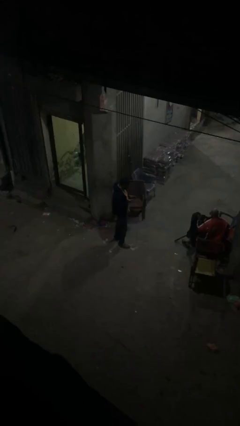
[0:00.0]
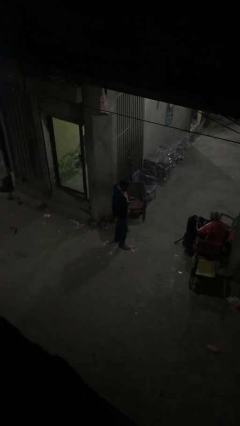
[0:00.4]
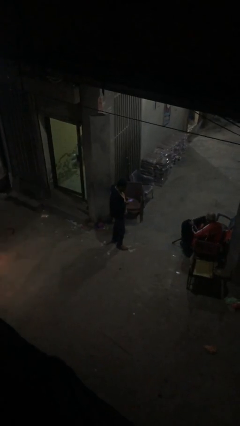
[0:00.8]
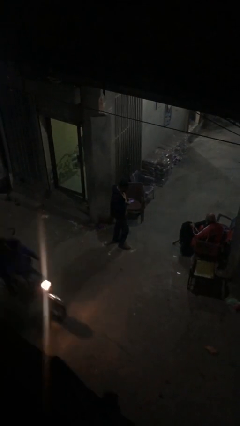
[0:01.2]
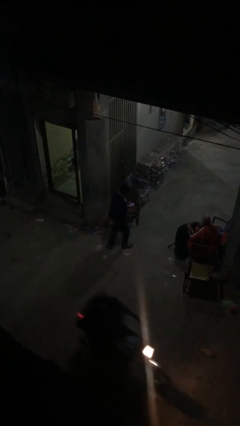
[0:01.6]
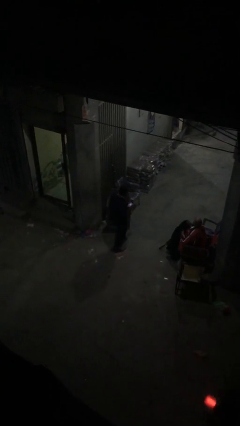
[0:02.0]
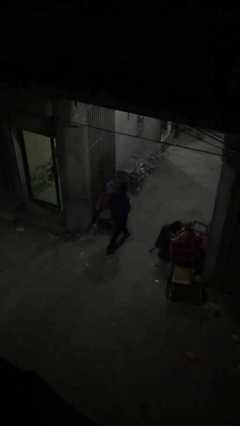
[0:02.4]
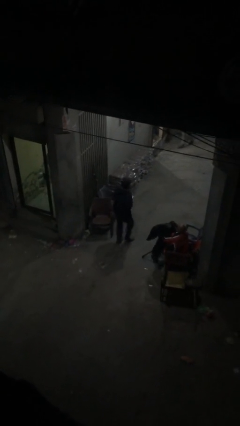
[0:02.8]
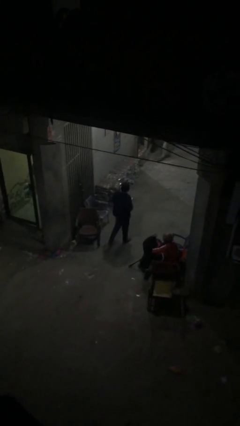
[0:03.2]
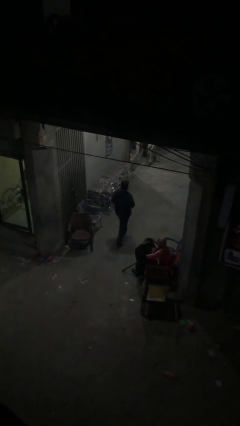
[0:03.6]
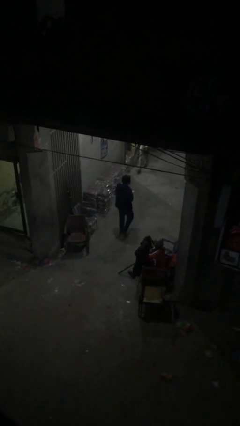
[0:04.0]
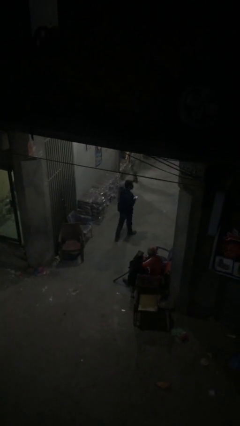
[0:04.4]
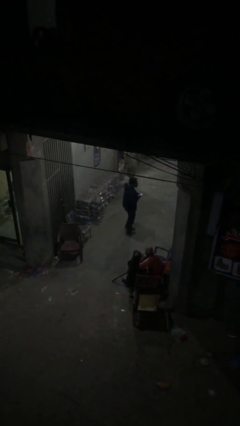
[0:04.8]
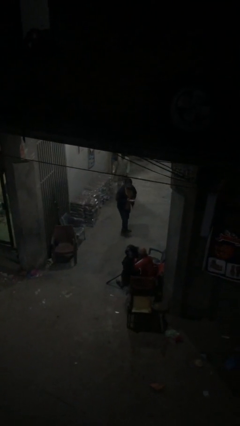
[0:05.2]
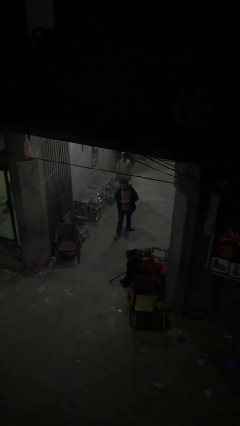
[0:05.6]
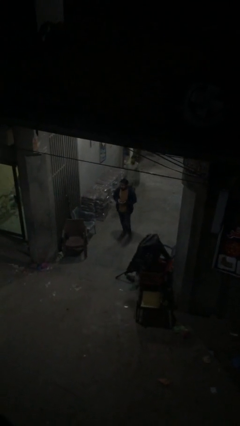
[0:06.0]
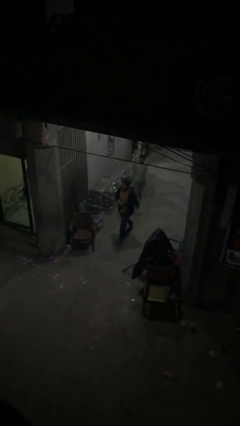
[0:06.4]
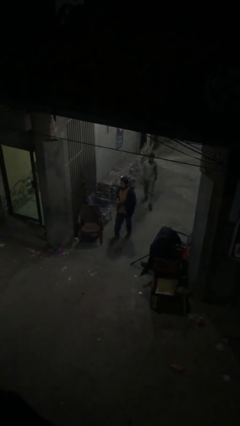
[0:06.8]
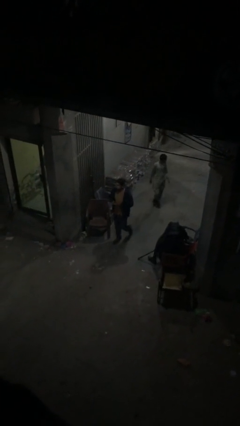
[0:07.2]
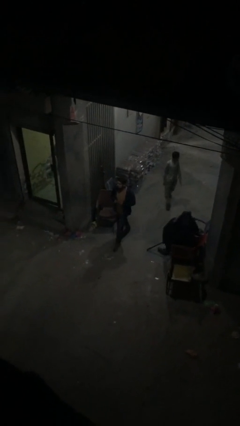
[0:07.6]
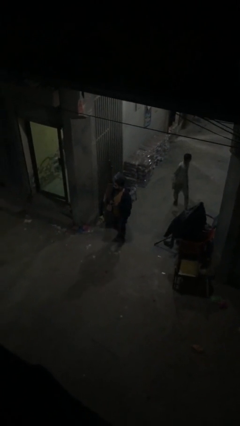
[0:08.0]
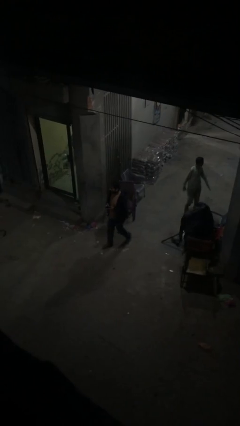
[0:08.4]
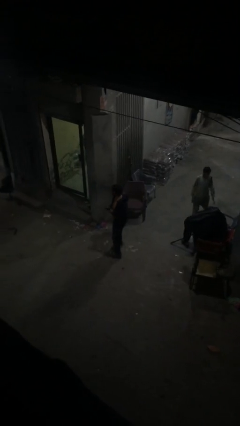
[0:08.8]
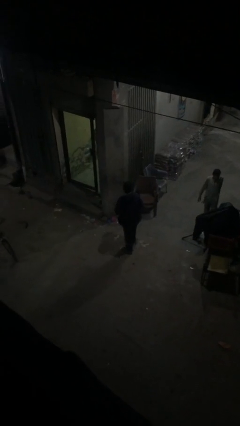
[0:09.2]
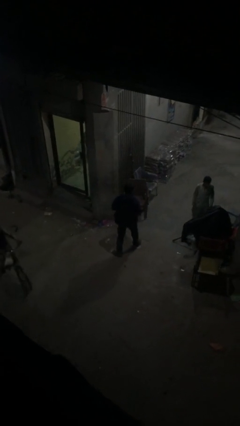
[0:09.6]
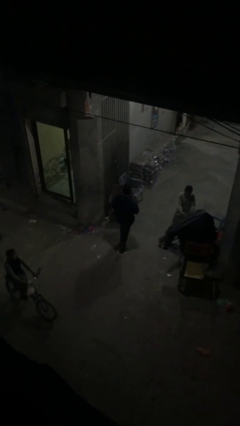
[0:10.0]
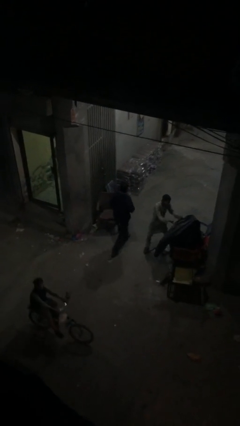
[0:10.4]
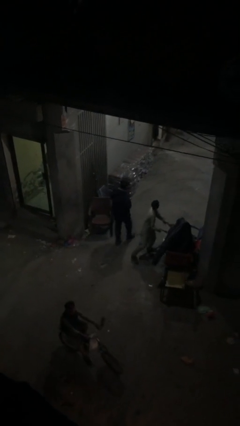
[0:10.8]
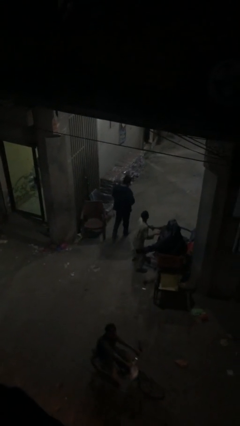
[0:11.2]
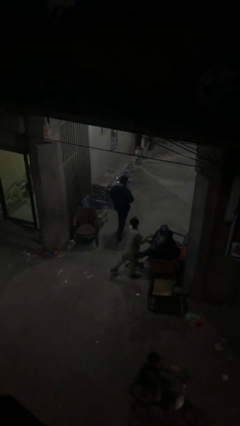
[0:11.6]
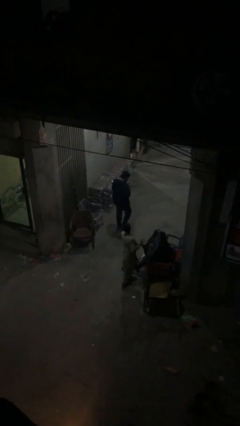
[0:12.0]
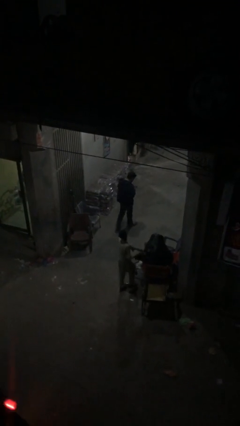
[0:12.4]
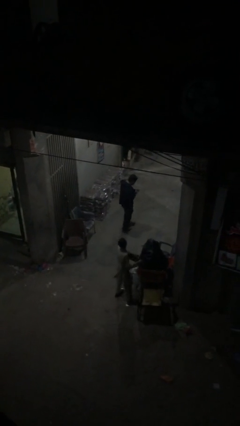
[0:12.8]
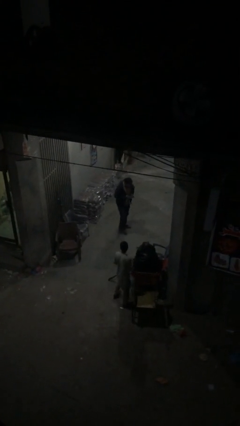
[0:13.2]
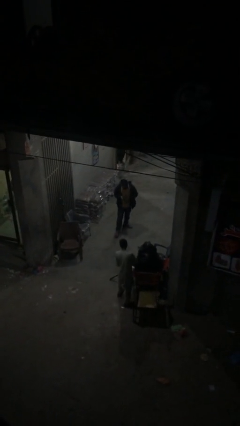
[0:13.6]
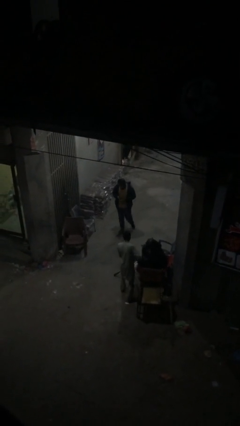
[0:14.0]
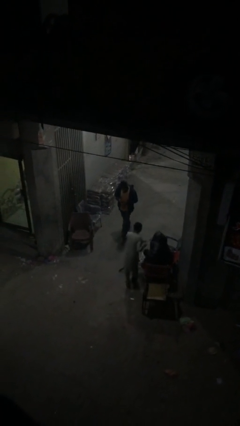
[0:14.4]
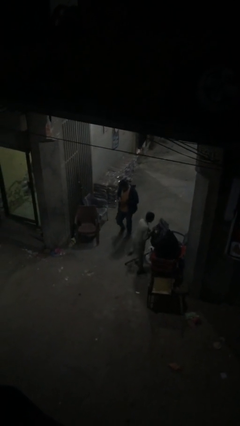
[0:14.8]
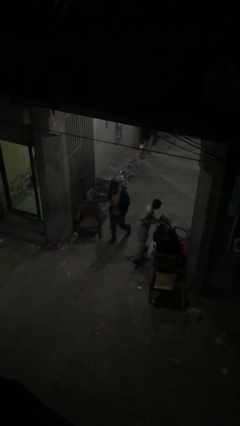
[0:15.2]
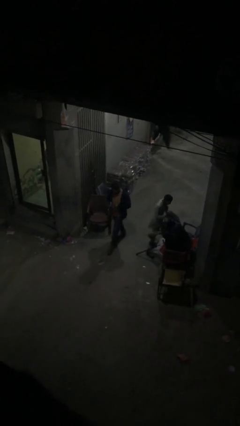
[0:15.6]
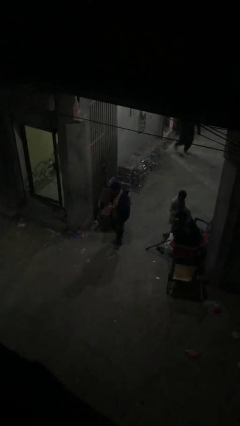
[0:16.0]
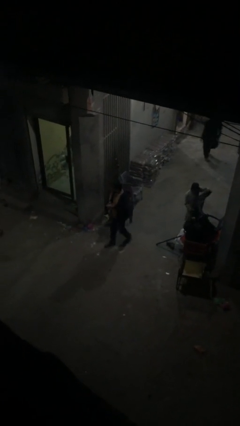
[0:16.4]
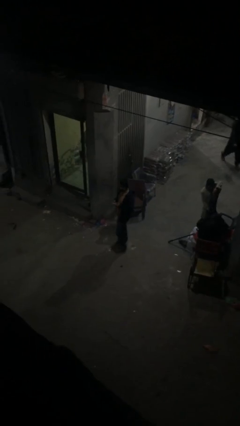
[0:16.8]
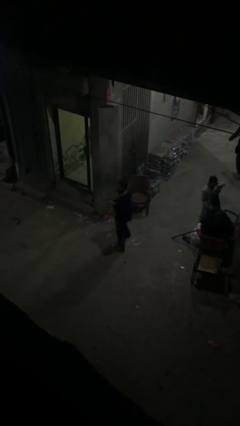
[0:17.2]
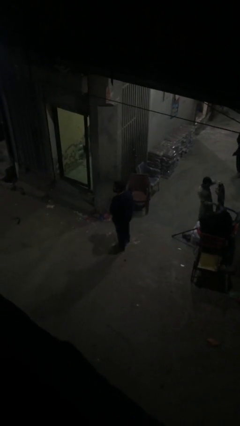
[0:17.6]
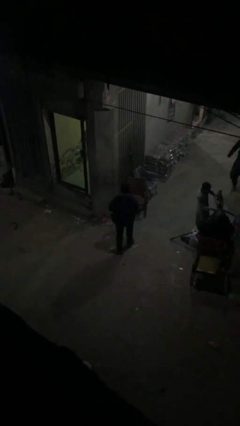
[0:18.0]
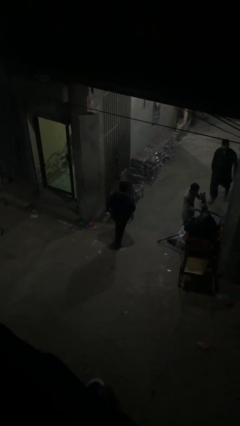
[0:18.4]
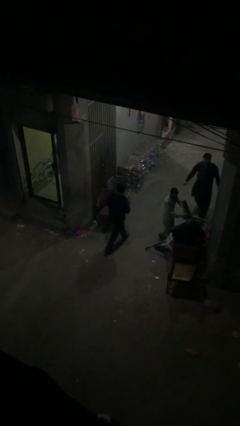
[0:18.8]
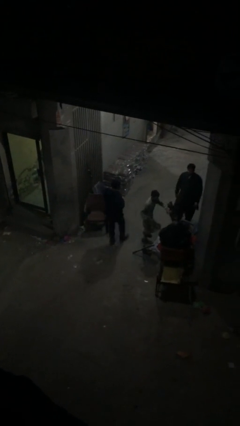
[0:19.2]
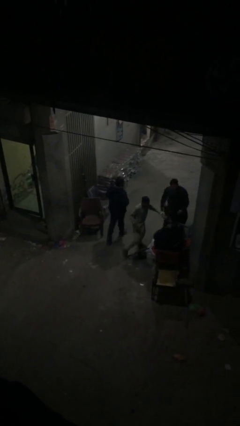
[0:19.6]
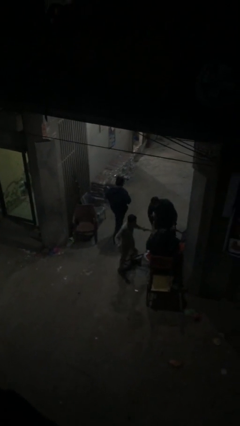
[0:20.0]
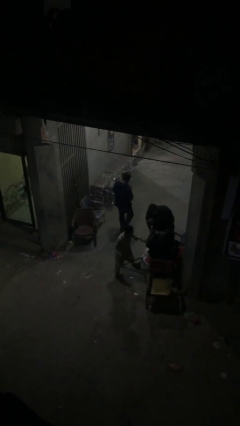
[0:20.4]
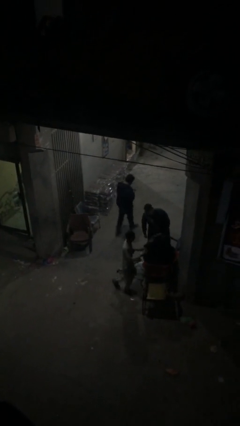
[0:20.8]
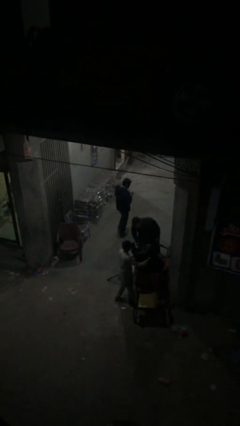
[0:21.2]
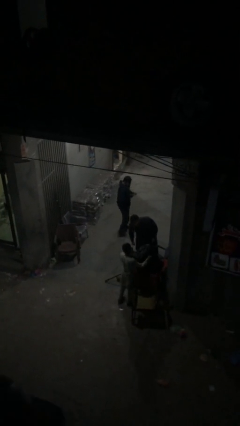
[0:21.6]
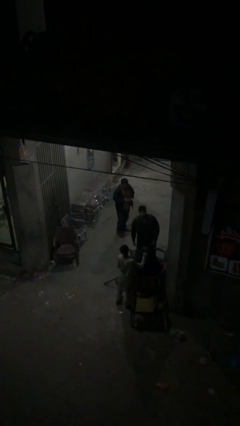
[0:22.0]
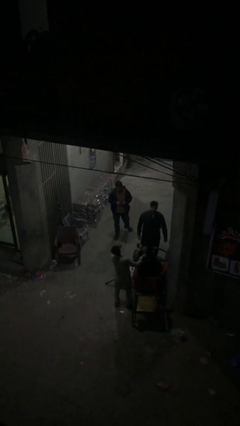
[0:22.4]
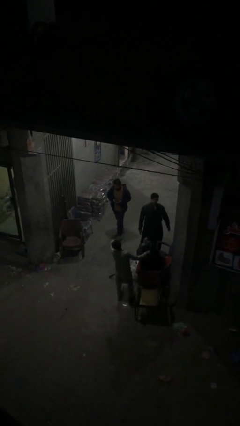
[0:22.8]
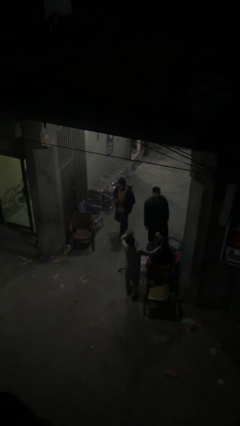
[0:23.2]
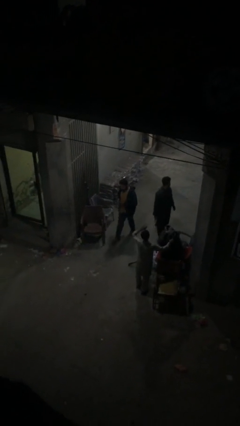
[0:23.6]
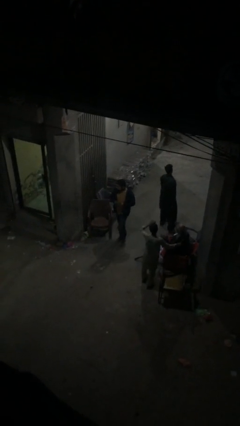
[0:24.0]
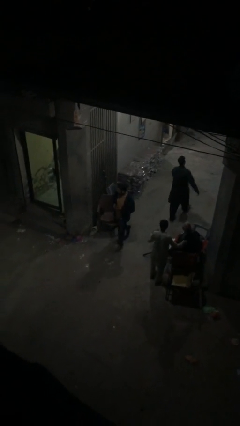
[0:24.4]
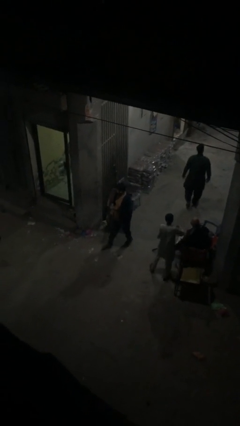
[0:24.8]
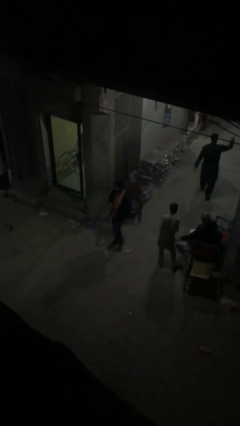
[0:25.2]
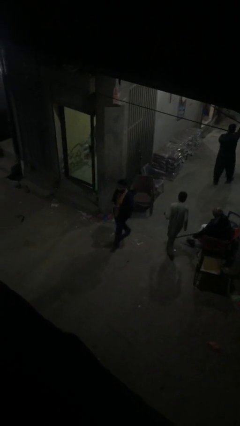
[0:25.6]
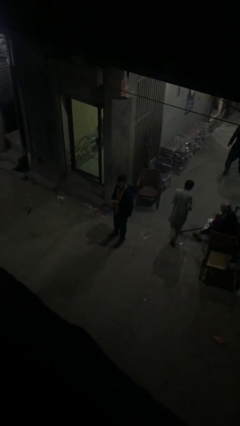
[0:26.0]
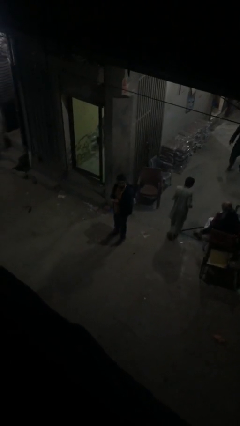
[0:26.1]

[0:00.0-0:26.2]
person texts on phone

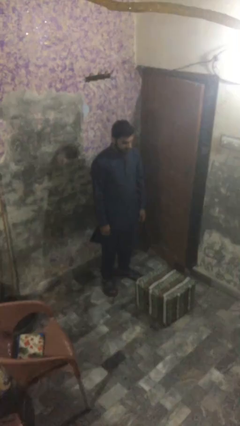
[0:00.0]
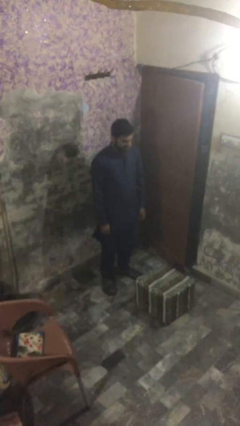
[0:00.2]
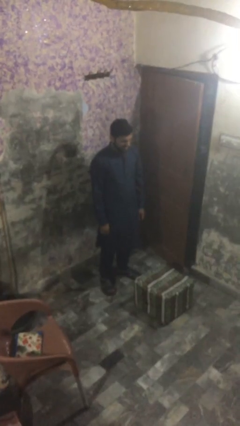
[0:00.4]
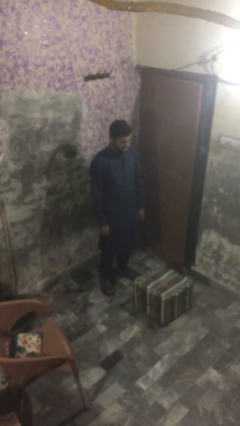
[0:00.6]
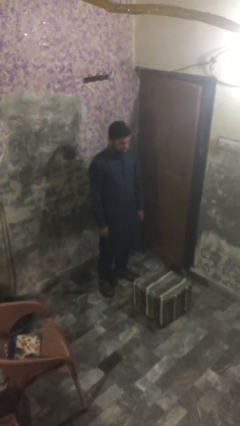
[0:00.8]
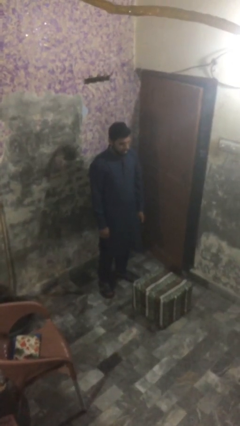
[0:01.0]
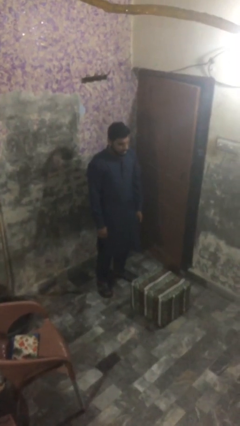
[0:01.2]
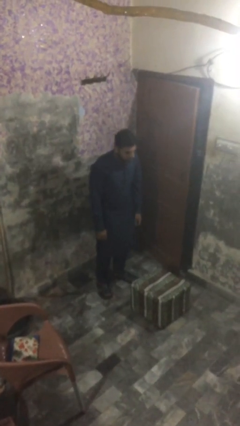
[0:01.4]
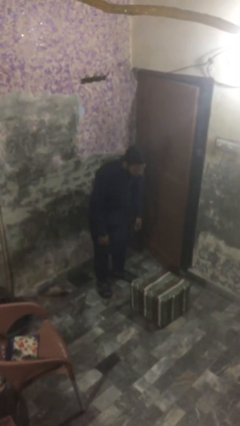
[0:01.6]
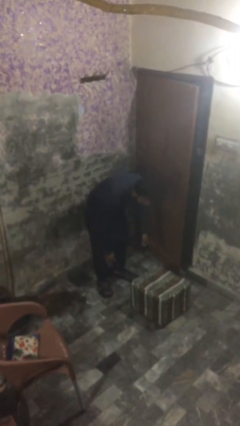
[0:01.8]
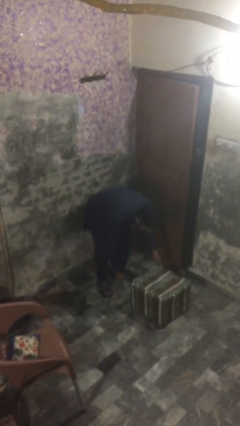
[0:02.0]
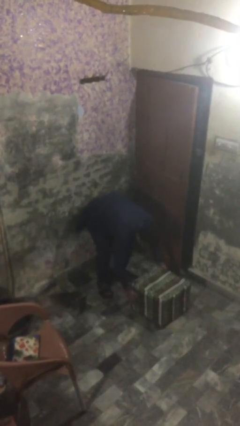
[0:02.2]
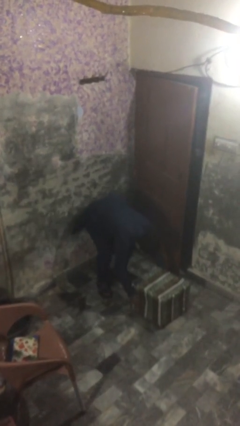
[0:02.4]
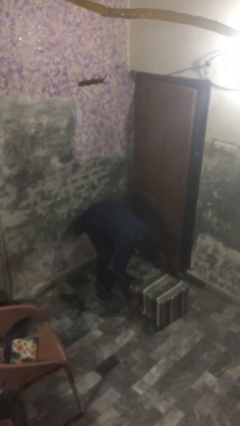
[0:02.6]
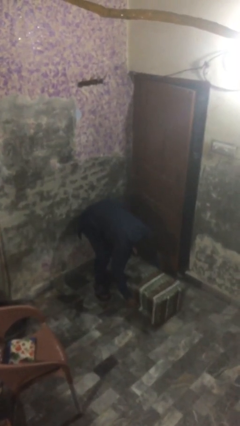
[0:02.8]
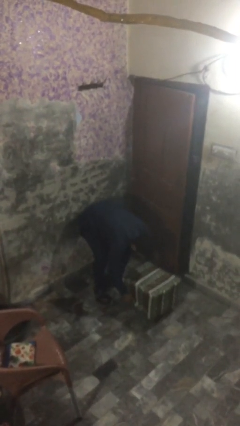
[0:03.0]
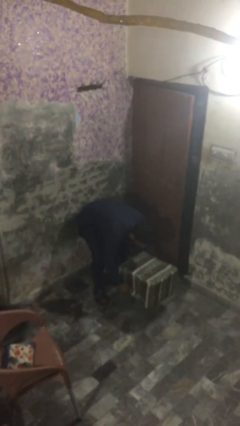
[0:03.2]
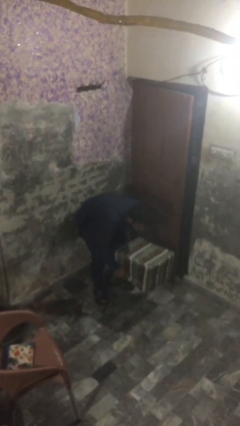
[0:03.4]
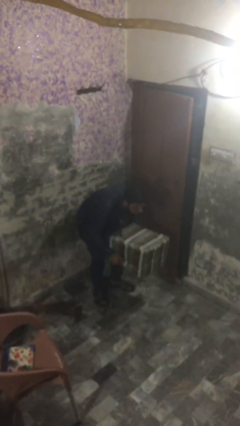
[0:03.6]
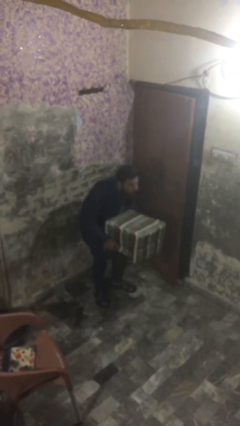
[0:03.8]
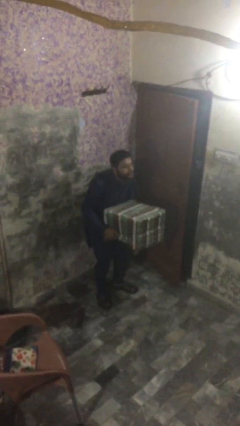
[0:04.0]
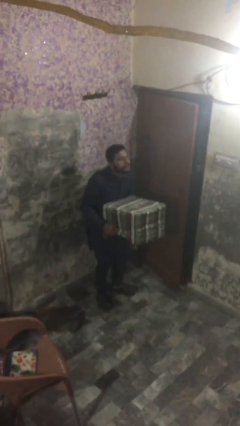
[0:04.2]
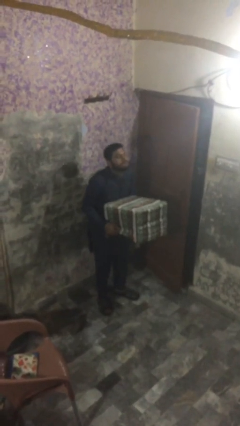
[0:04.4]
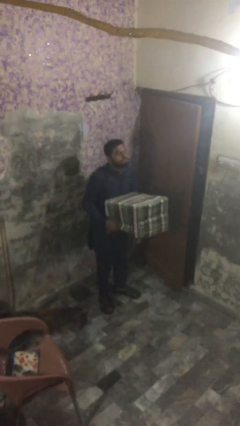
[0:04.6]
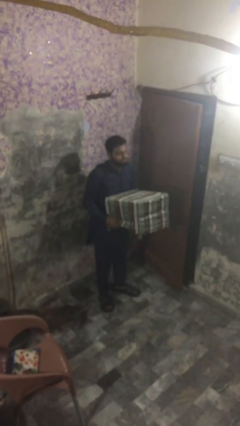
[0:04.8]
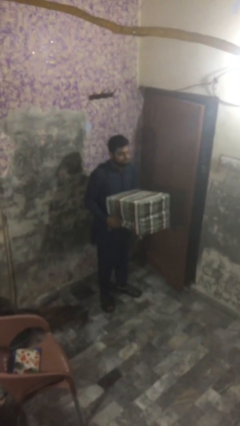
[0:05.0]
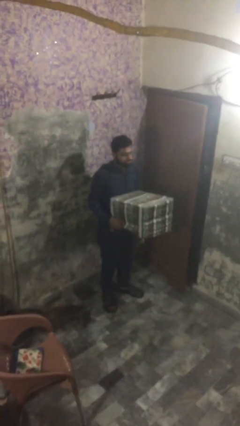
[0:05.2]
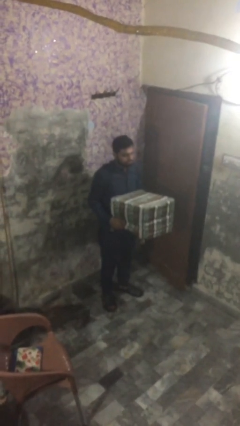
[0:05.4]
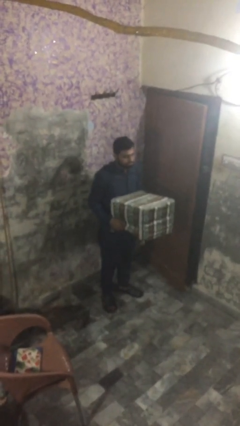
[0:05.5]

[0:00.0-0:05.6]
person picks up object from floor
